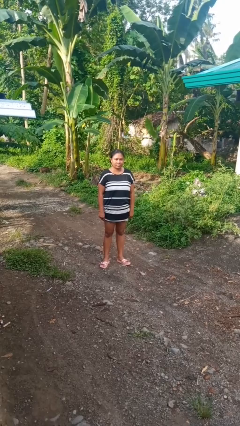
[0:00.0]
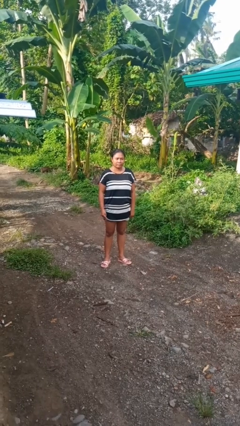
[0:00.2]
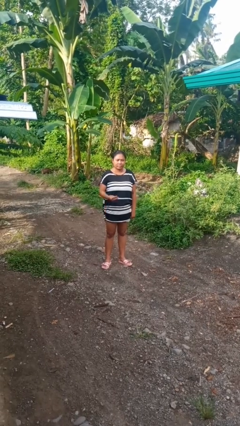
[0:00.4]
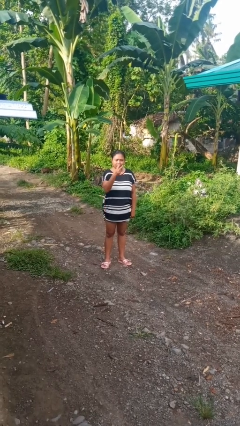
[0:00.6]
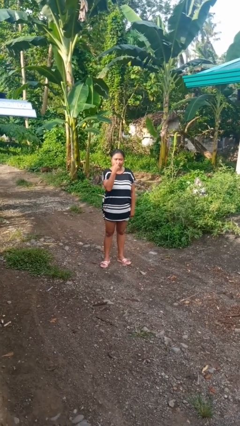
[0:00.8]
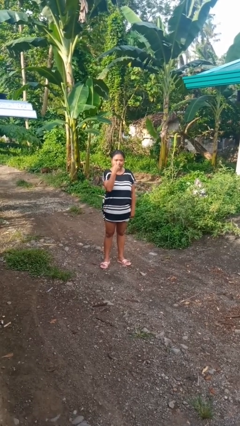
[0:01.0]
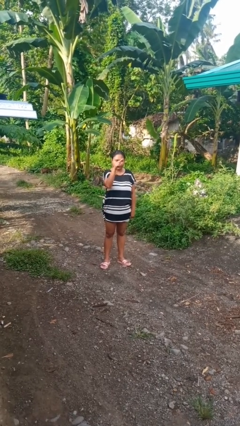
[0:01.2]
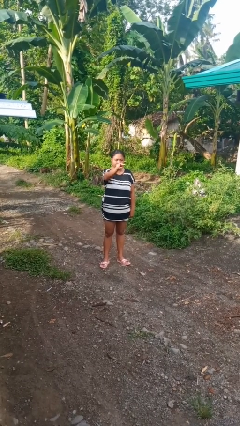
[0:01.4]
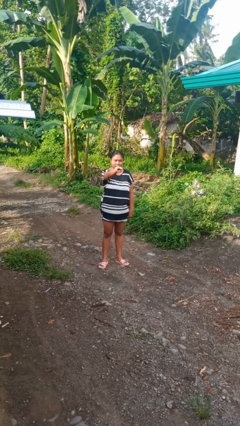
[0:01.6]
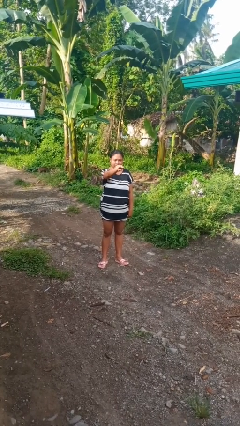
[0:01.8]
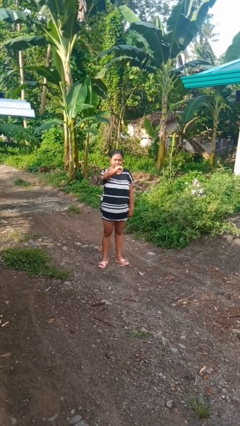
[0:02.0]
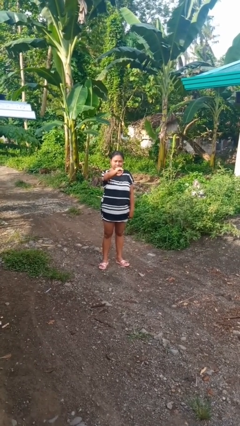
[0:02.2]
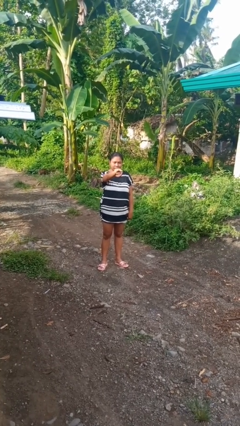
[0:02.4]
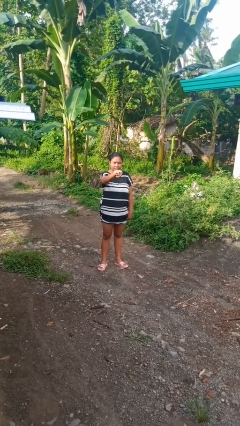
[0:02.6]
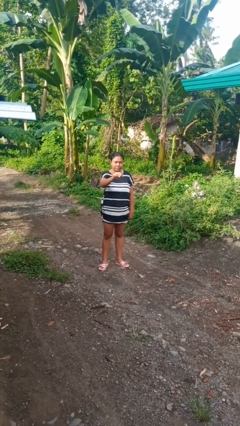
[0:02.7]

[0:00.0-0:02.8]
person gestures watch closely

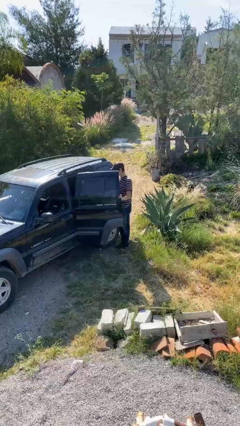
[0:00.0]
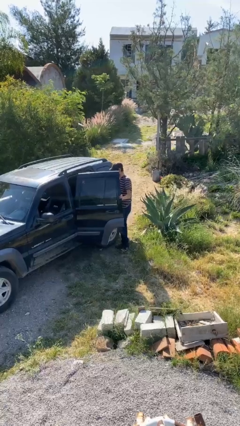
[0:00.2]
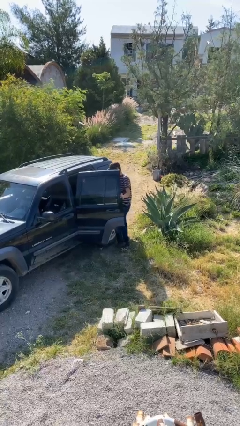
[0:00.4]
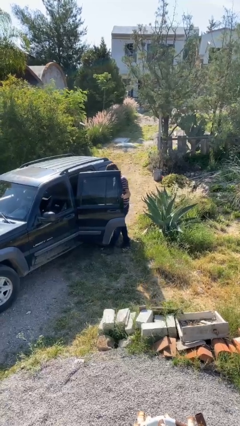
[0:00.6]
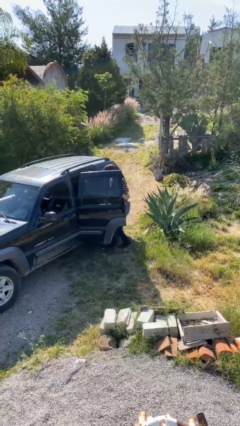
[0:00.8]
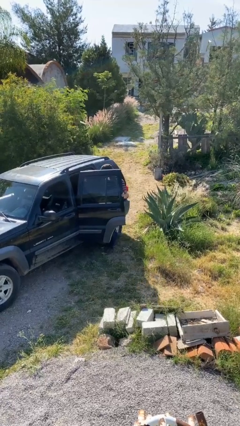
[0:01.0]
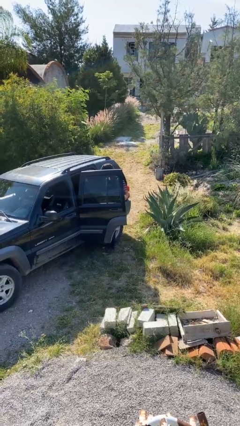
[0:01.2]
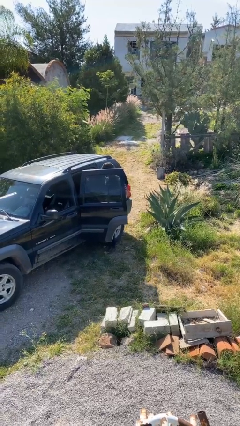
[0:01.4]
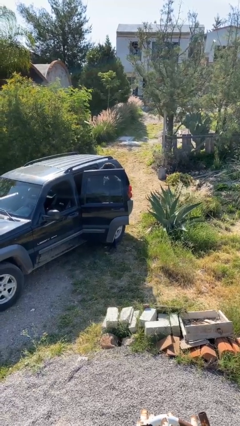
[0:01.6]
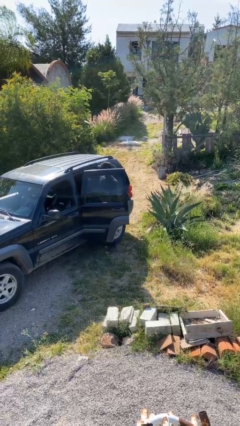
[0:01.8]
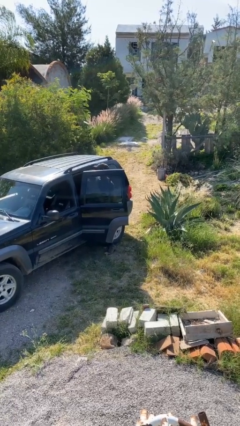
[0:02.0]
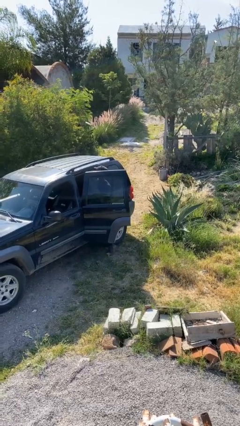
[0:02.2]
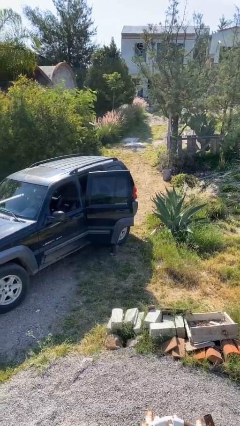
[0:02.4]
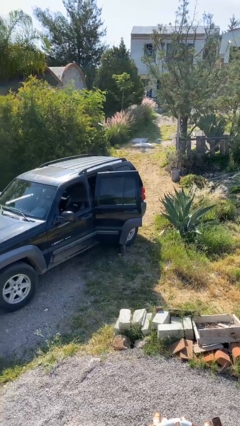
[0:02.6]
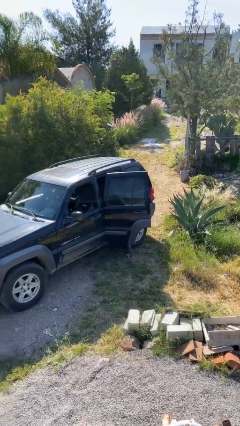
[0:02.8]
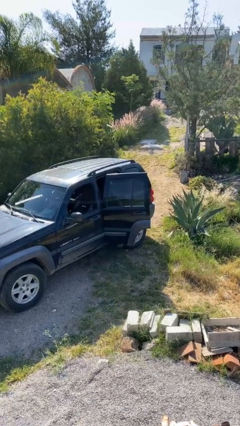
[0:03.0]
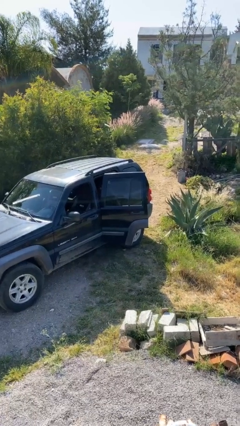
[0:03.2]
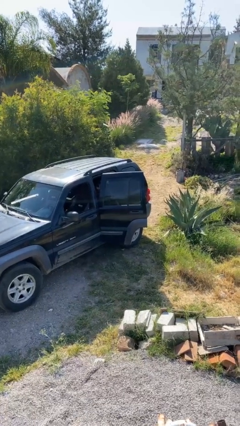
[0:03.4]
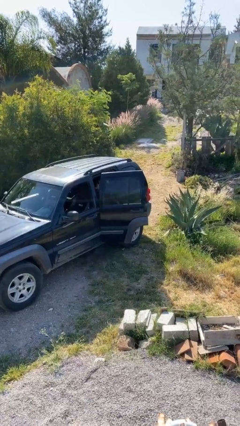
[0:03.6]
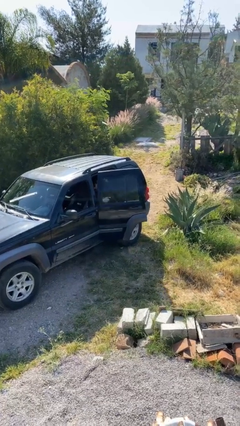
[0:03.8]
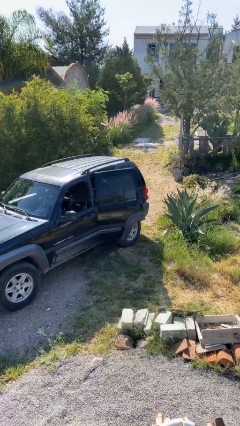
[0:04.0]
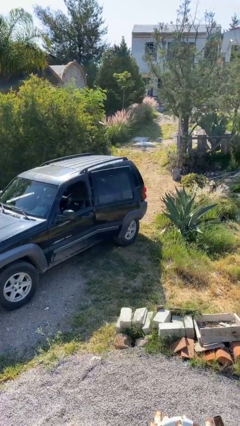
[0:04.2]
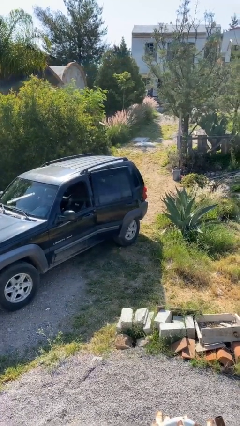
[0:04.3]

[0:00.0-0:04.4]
person enters car

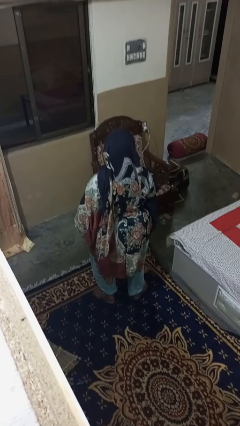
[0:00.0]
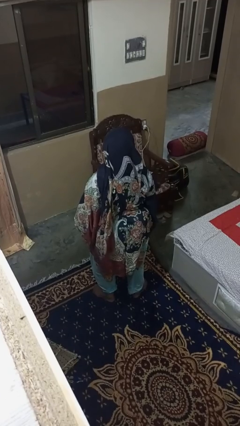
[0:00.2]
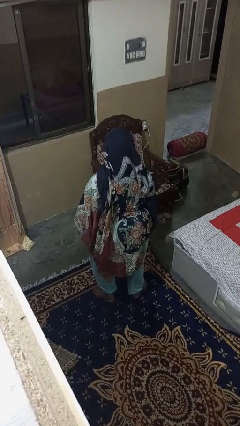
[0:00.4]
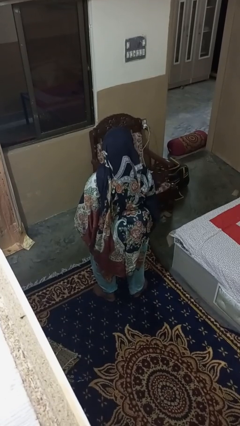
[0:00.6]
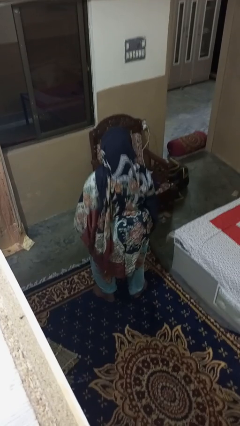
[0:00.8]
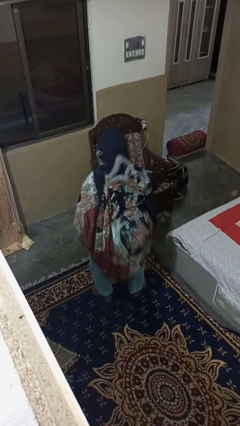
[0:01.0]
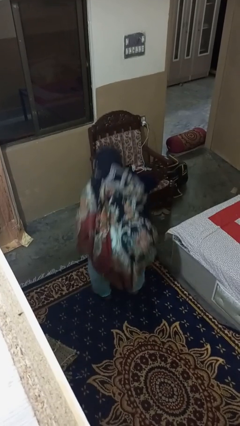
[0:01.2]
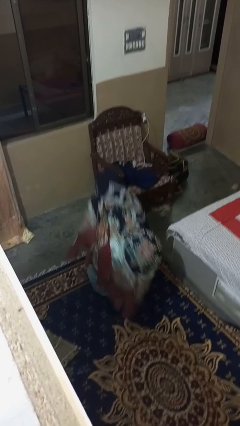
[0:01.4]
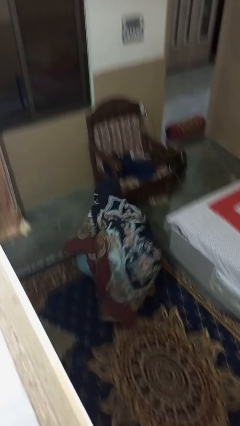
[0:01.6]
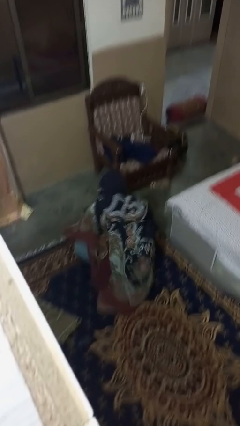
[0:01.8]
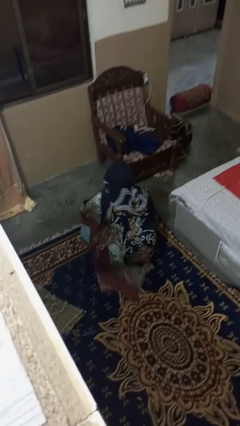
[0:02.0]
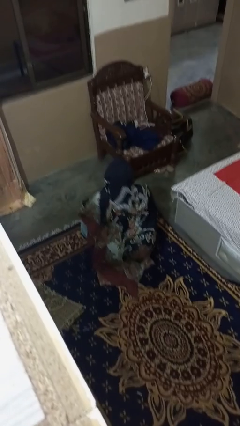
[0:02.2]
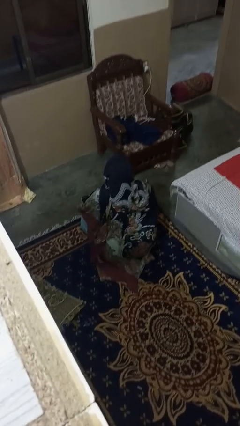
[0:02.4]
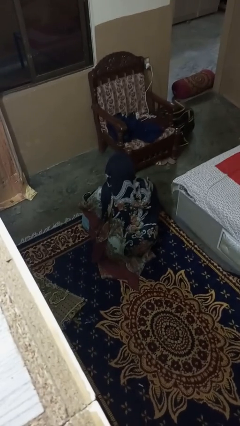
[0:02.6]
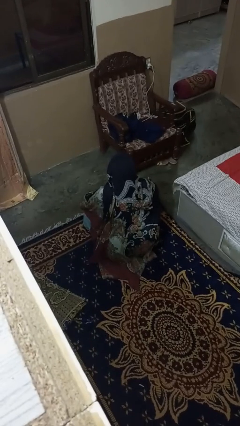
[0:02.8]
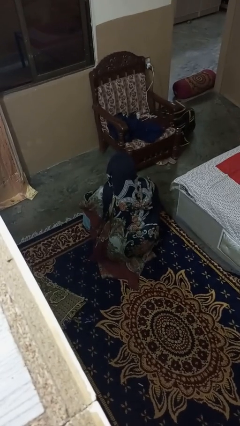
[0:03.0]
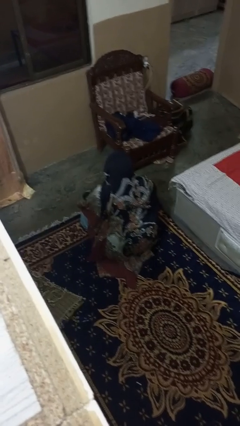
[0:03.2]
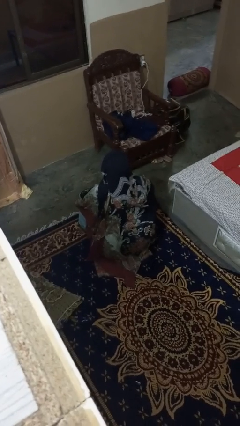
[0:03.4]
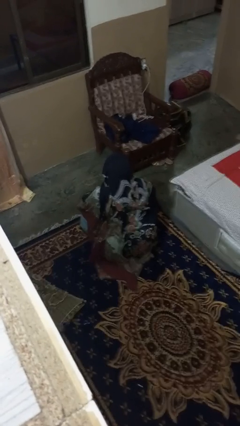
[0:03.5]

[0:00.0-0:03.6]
person squats

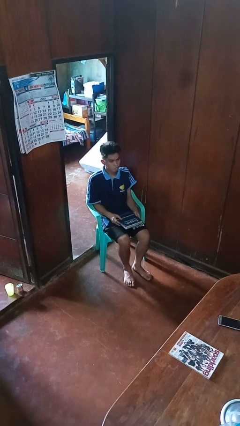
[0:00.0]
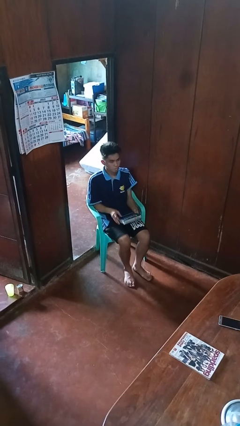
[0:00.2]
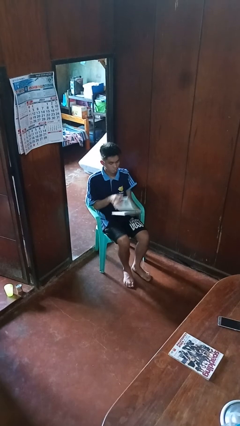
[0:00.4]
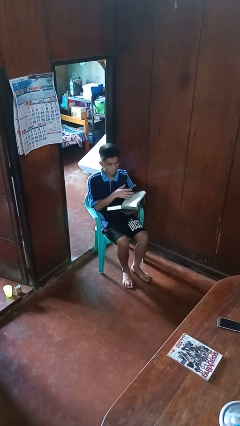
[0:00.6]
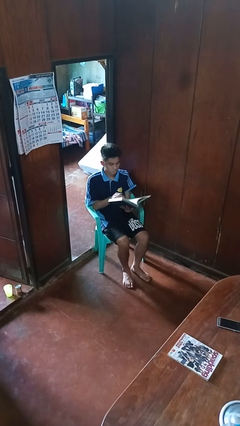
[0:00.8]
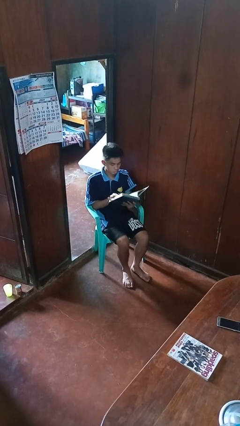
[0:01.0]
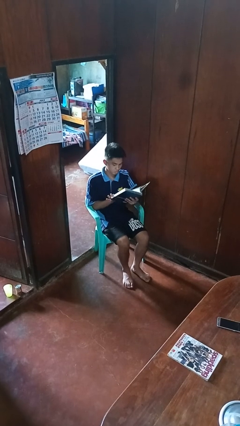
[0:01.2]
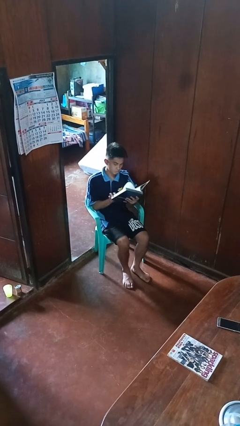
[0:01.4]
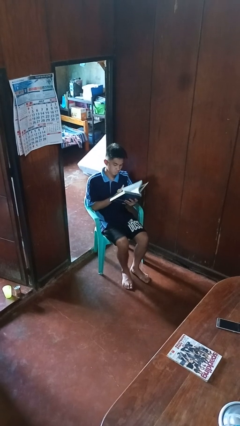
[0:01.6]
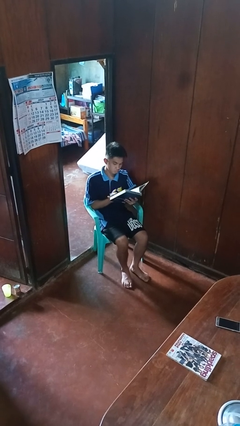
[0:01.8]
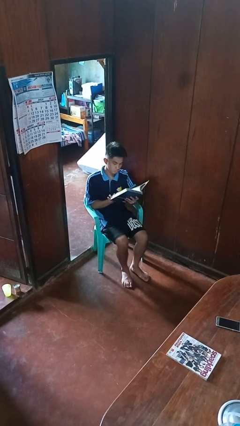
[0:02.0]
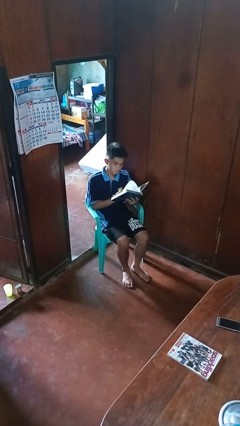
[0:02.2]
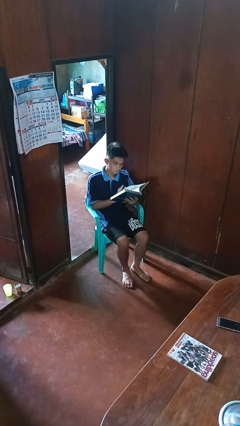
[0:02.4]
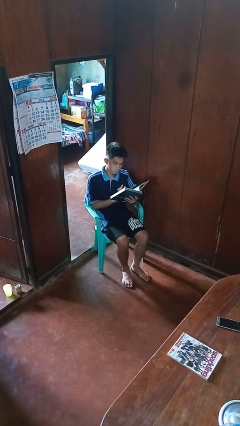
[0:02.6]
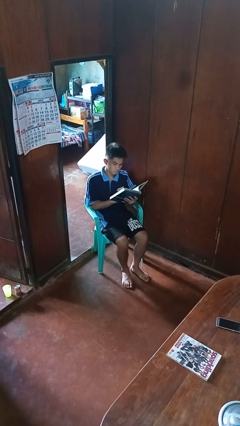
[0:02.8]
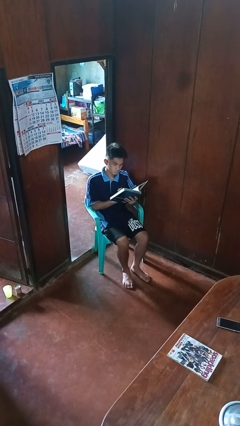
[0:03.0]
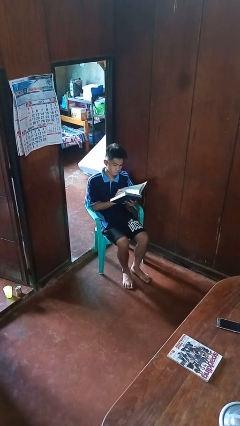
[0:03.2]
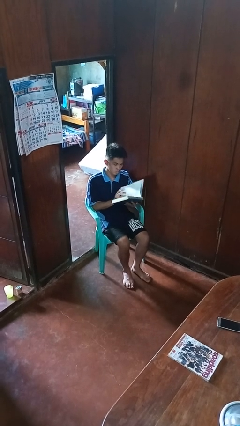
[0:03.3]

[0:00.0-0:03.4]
person reads book

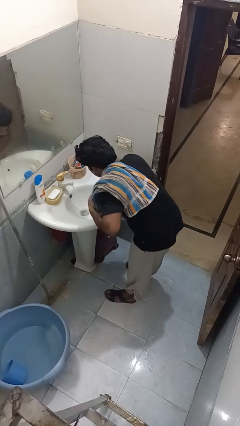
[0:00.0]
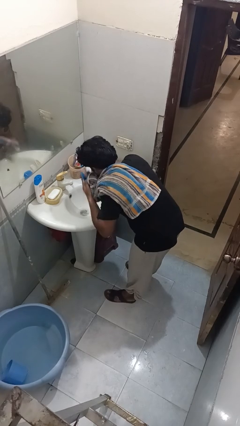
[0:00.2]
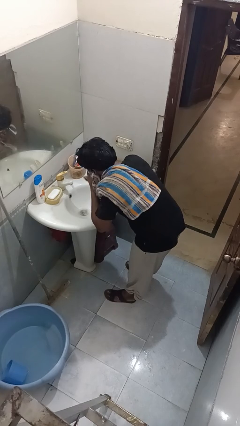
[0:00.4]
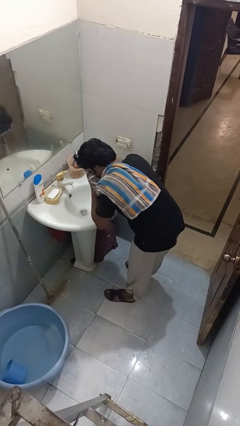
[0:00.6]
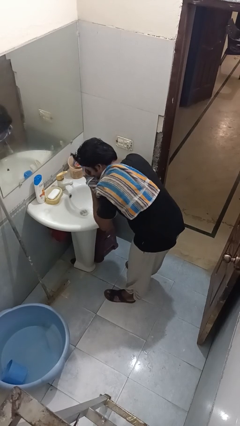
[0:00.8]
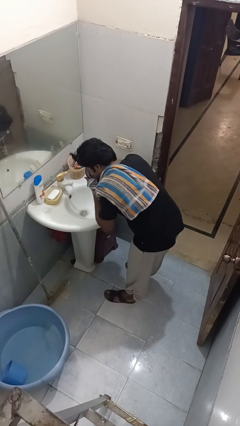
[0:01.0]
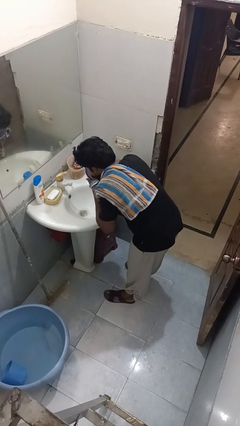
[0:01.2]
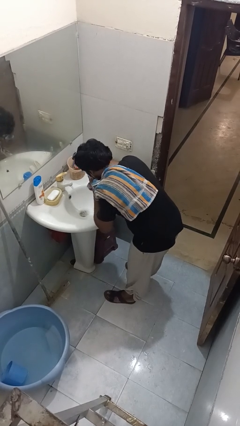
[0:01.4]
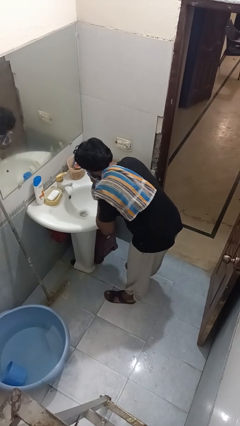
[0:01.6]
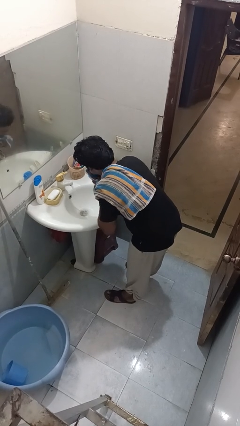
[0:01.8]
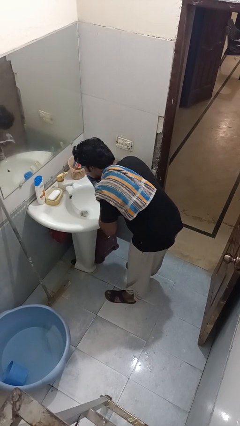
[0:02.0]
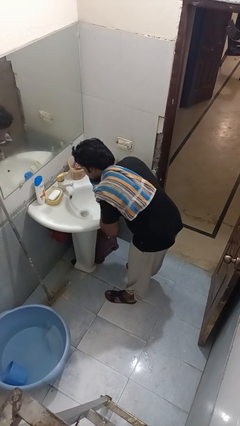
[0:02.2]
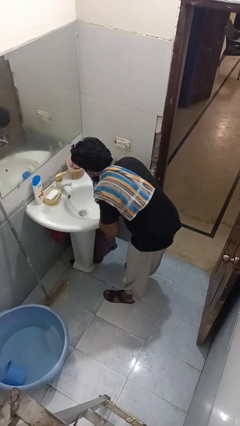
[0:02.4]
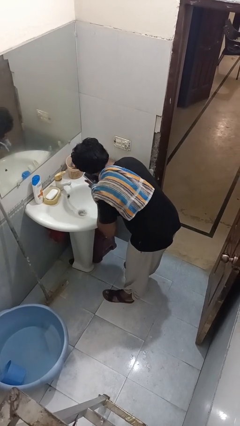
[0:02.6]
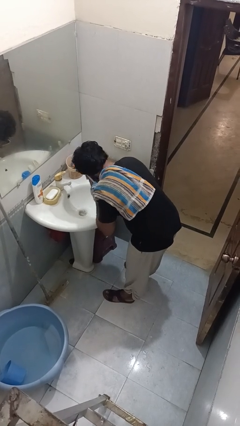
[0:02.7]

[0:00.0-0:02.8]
person dries face with towel

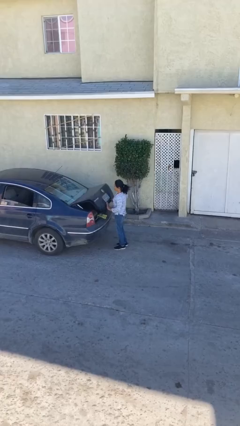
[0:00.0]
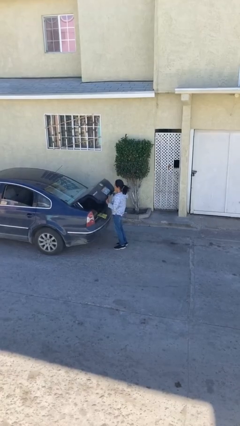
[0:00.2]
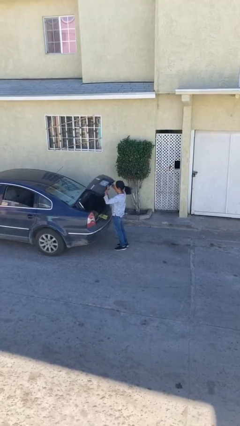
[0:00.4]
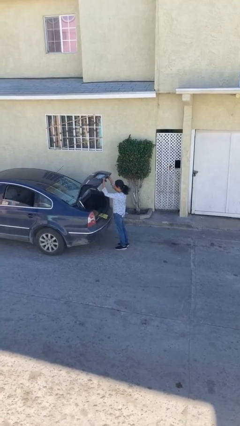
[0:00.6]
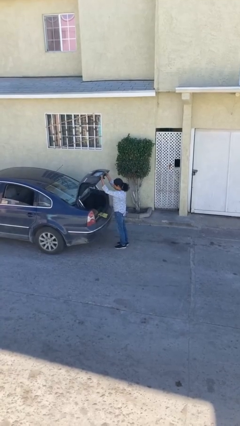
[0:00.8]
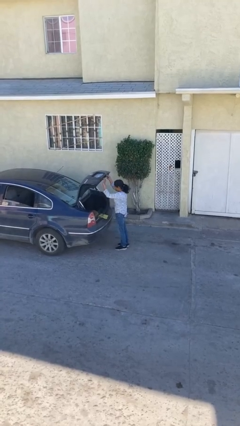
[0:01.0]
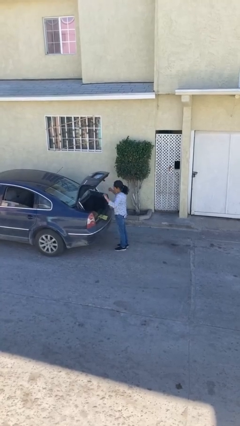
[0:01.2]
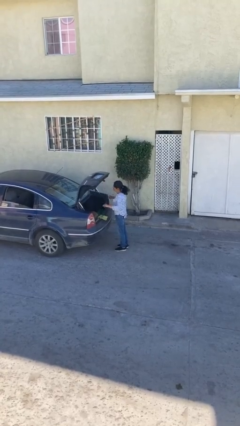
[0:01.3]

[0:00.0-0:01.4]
person opens car trunk
